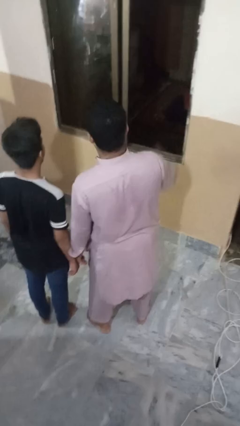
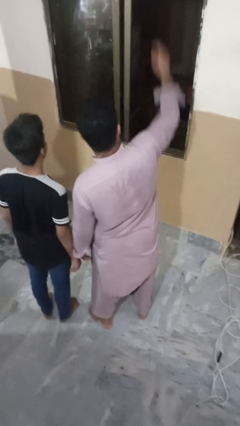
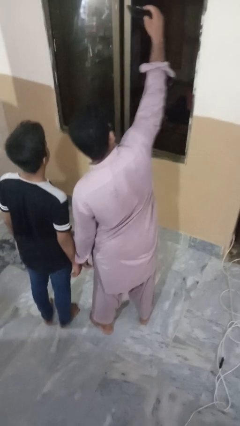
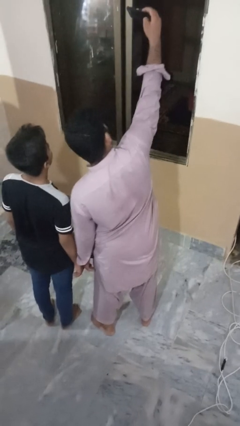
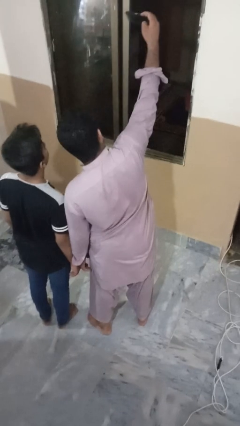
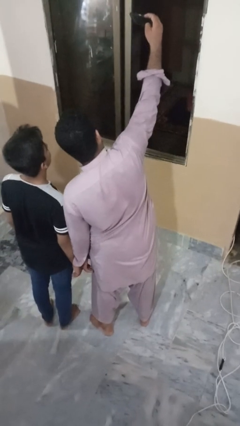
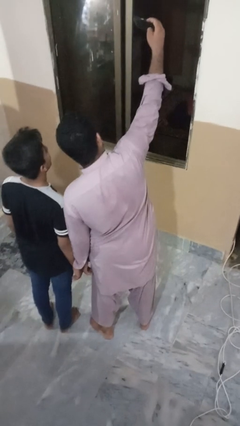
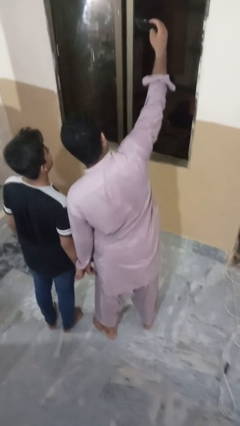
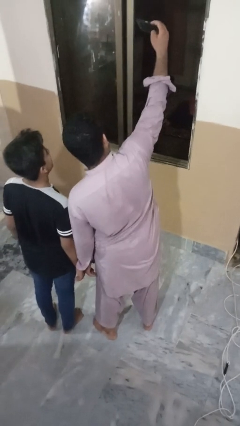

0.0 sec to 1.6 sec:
person takes selfie with person

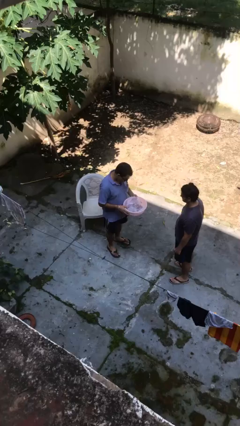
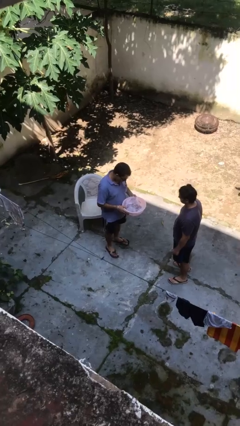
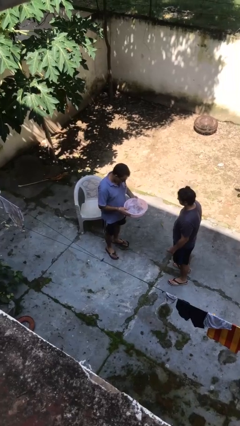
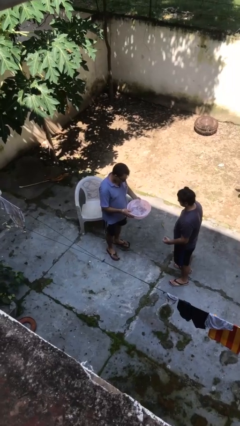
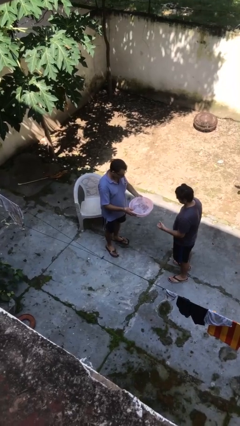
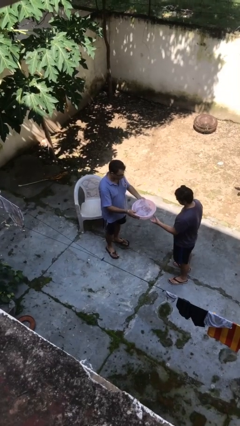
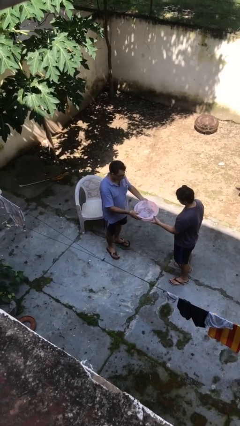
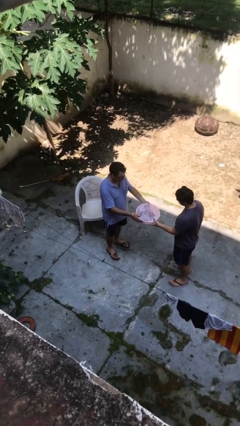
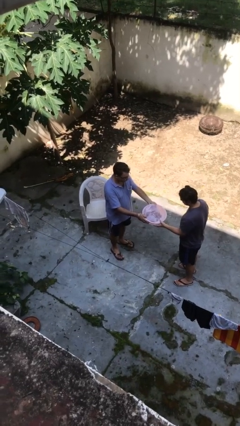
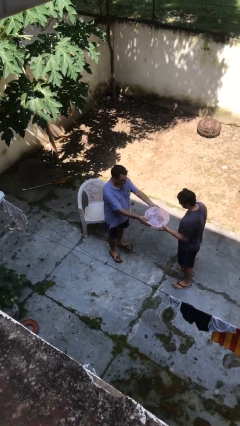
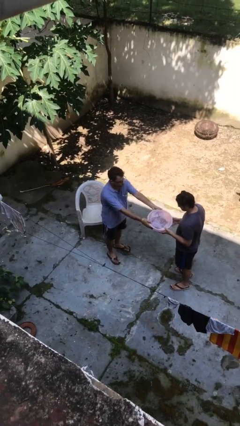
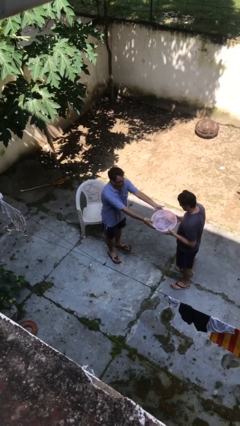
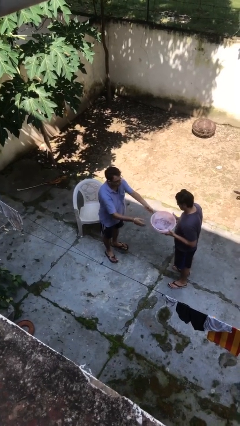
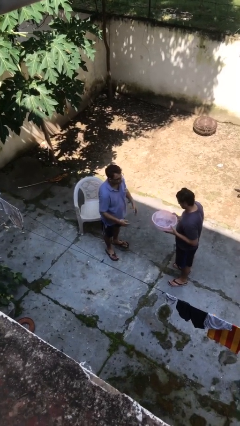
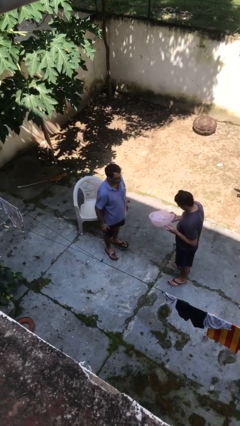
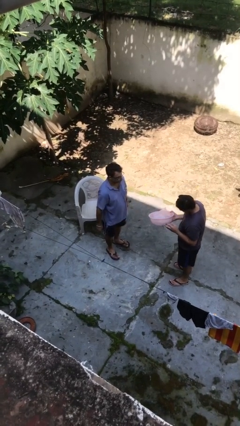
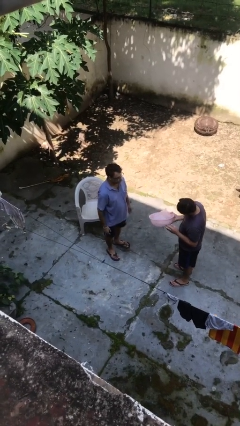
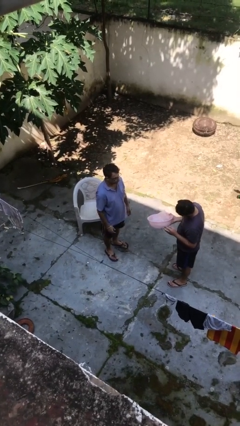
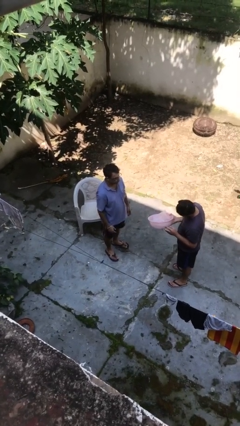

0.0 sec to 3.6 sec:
person transfers object to person

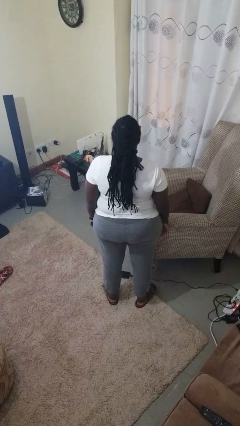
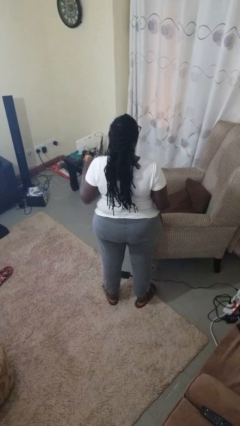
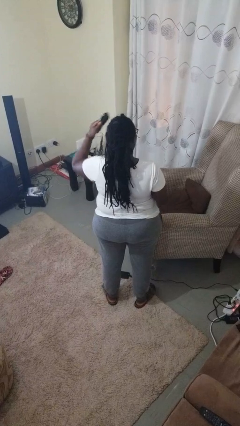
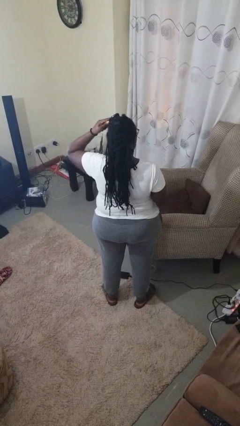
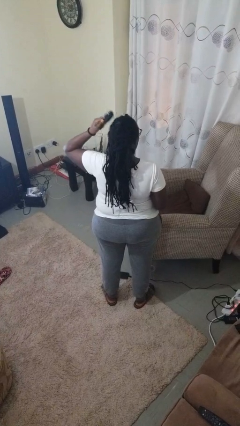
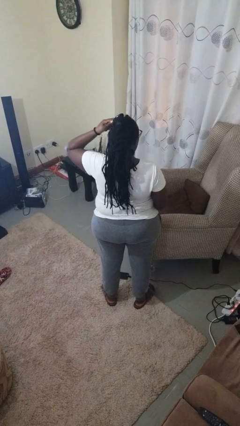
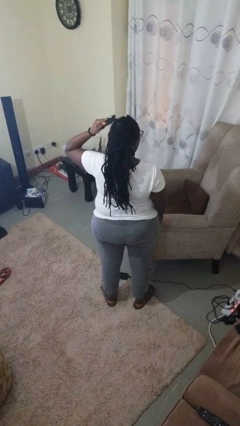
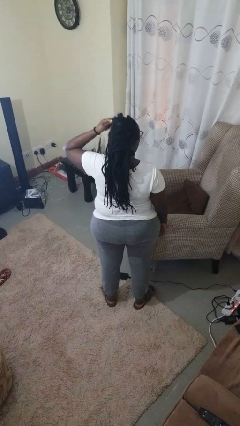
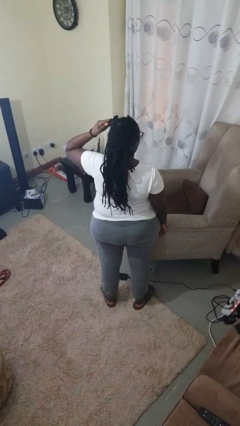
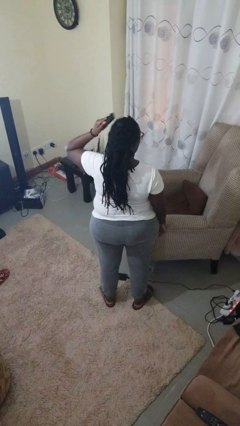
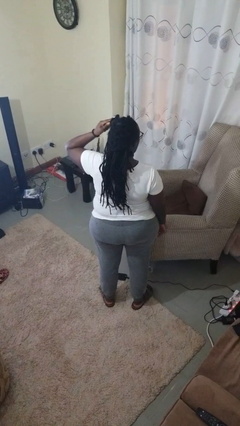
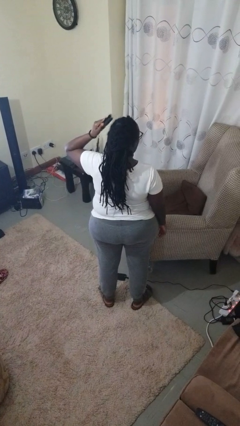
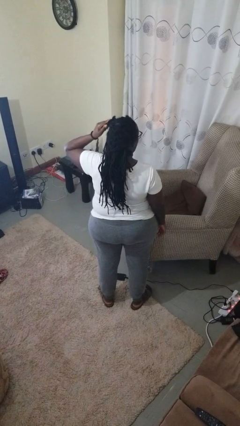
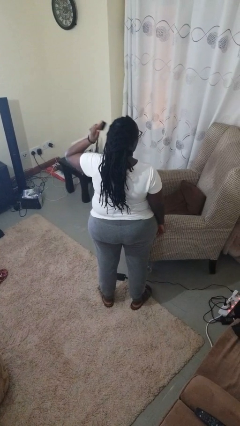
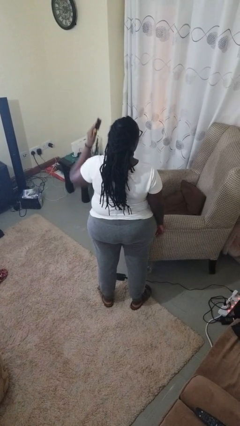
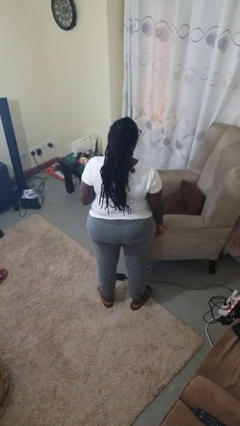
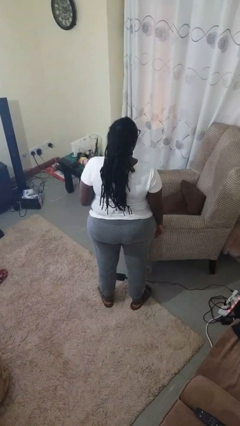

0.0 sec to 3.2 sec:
person brushes hair

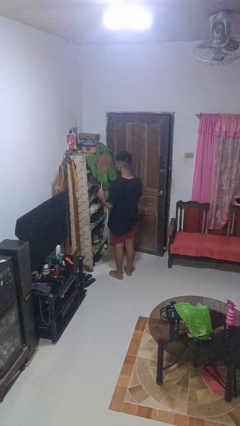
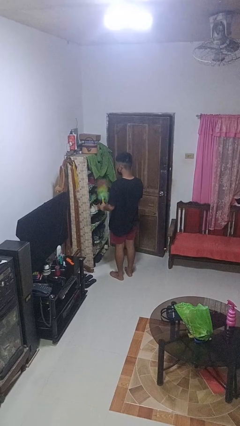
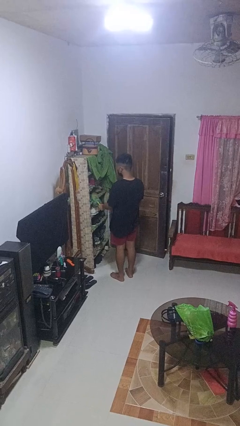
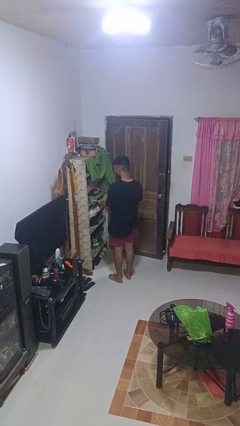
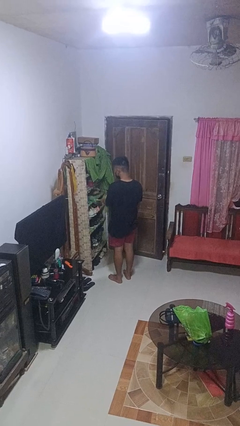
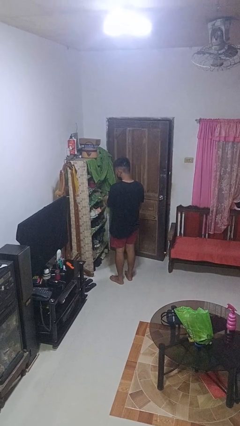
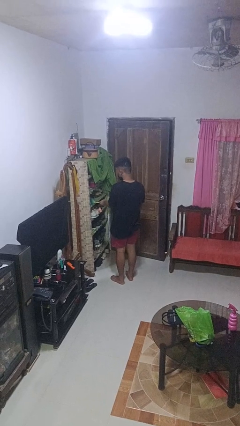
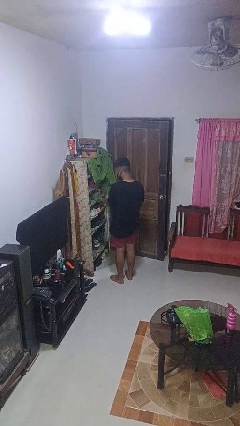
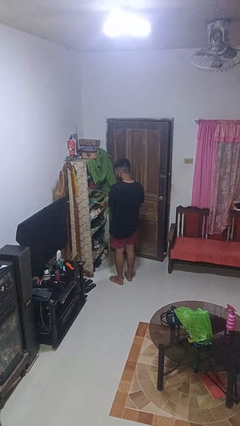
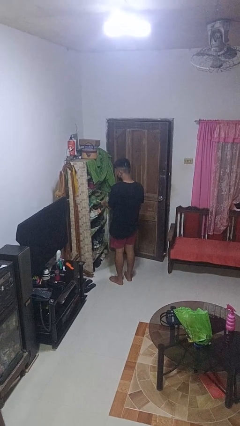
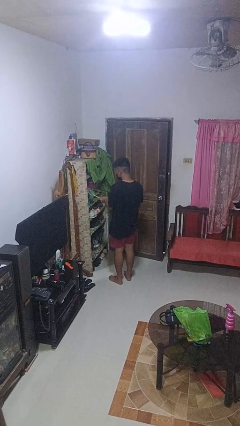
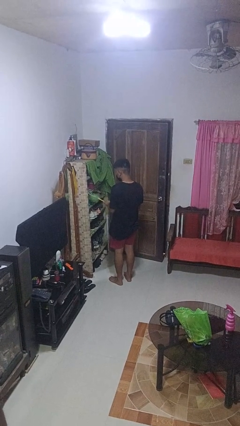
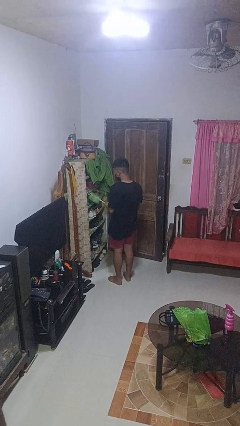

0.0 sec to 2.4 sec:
person dusts furniture

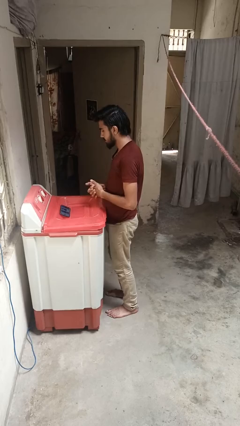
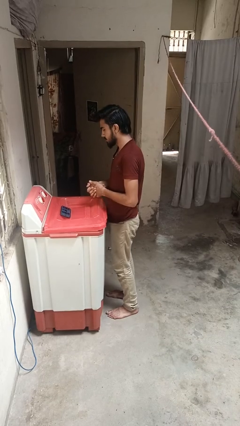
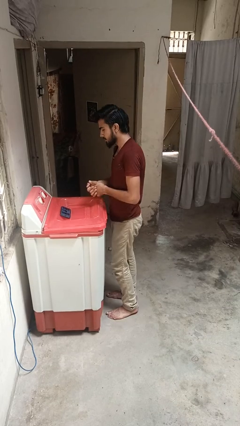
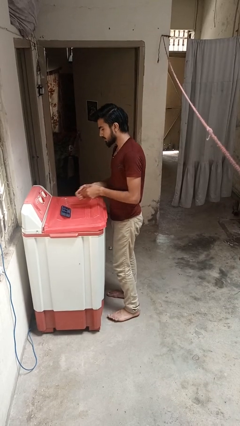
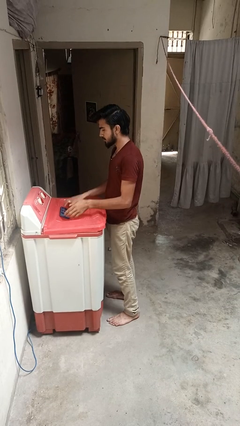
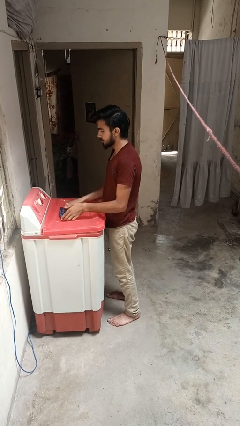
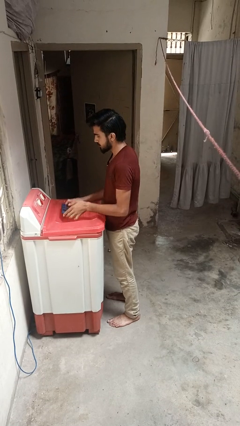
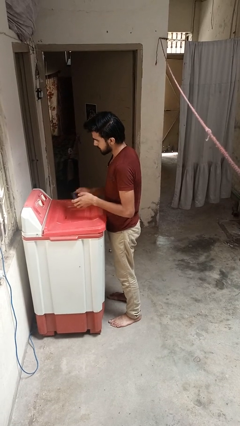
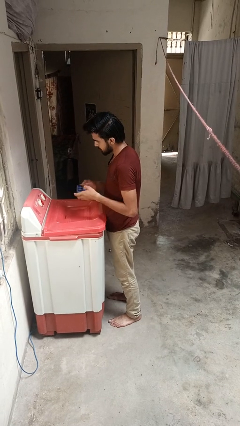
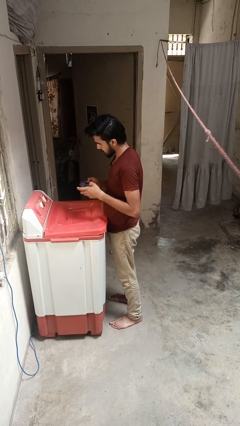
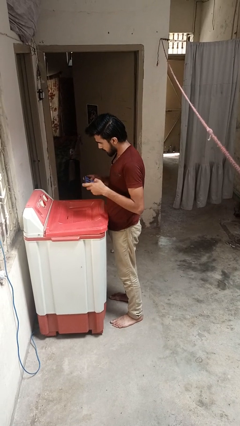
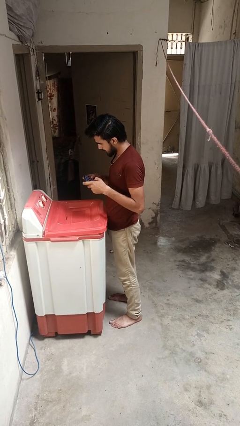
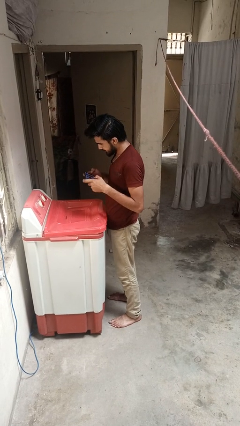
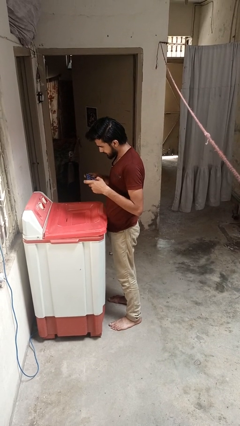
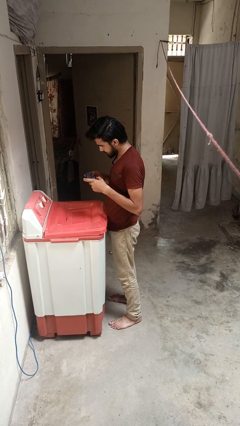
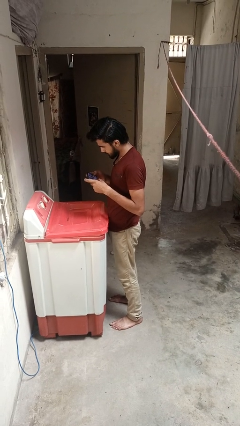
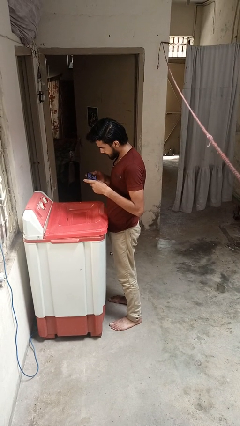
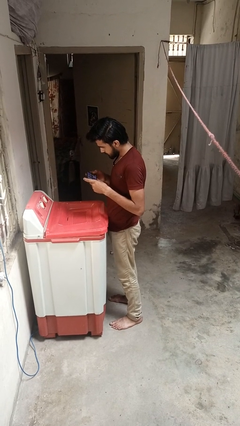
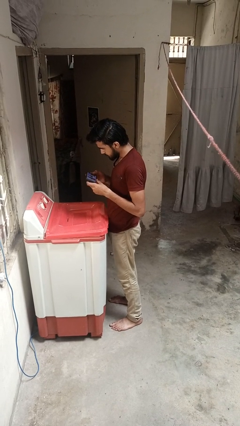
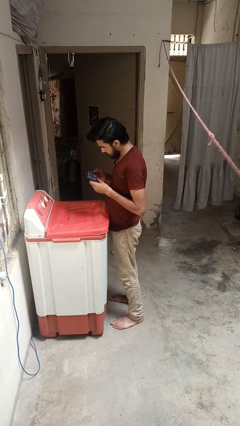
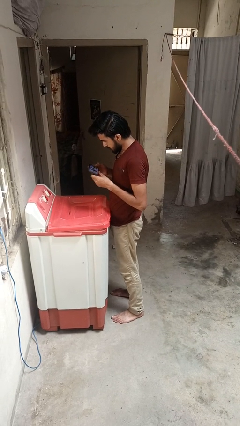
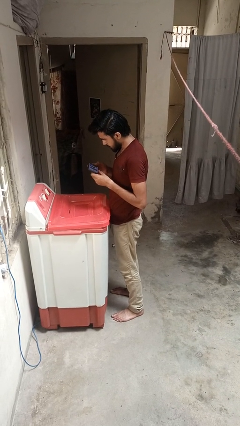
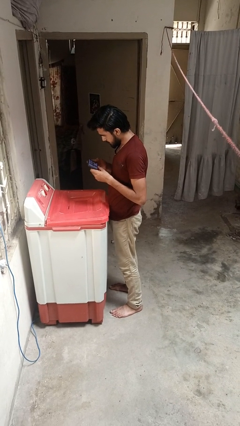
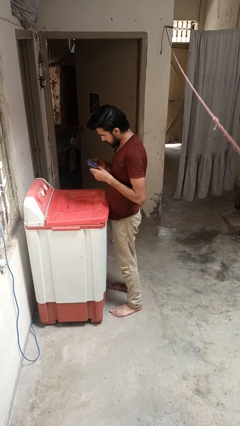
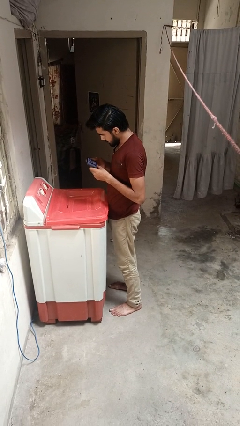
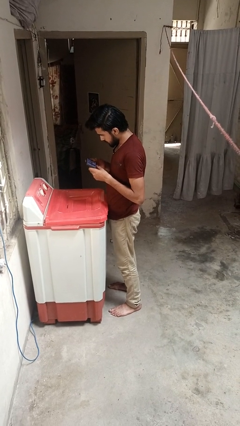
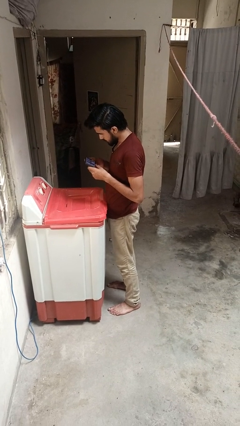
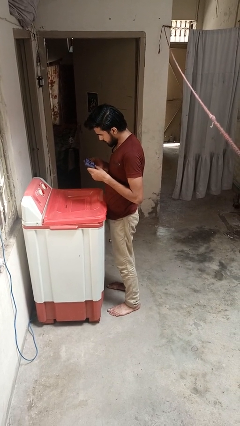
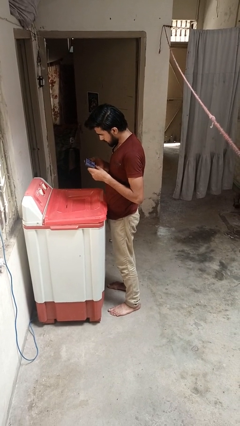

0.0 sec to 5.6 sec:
person interacts with tablet

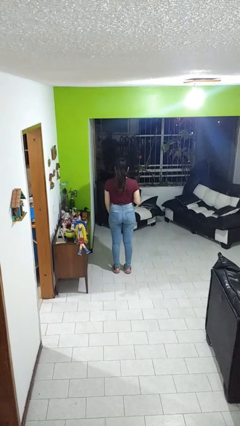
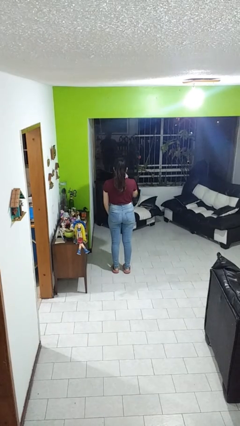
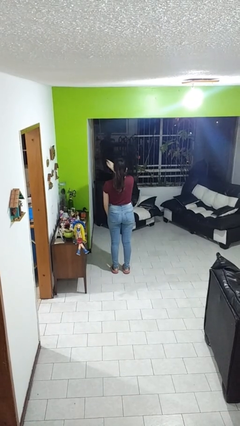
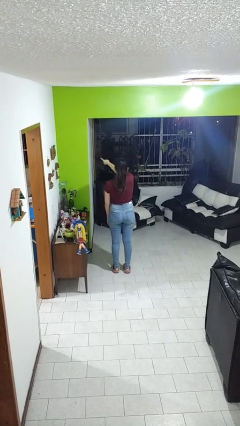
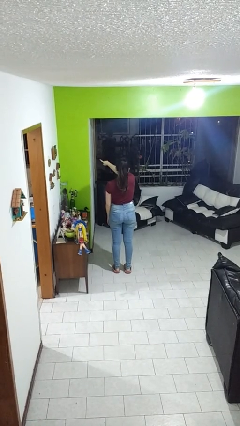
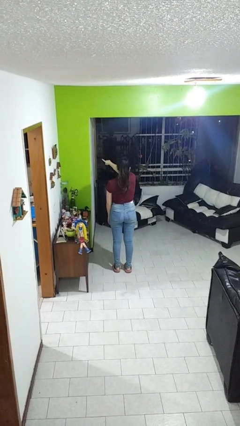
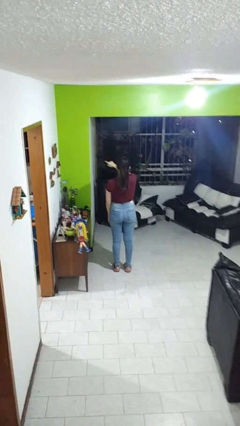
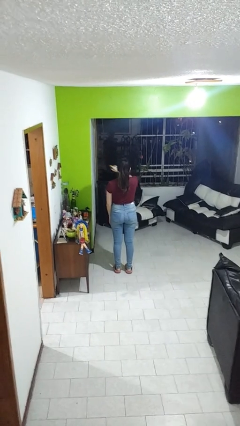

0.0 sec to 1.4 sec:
person points at person
